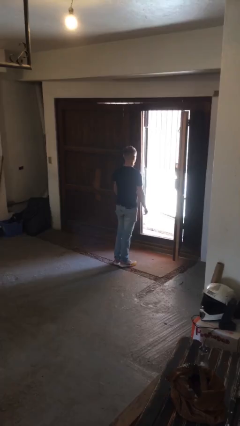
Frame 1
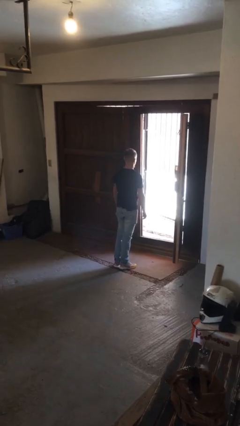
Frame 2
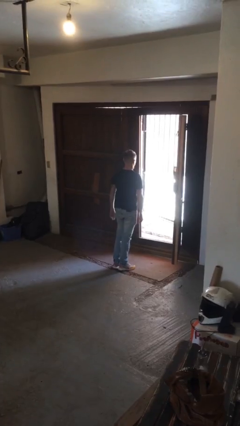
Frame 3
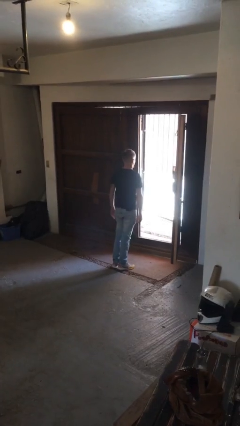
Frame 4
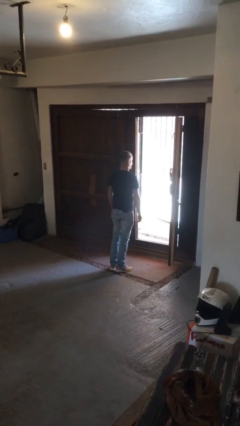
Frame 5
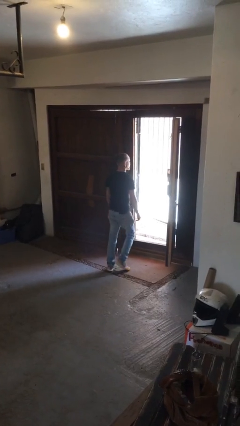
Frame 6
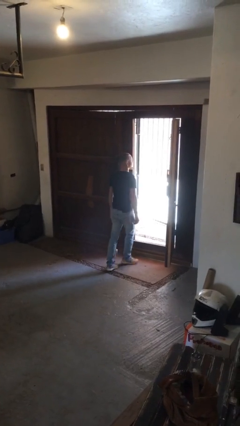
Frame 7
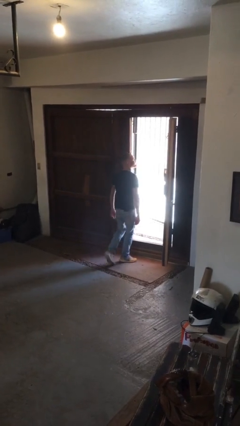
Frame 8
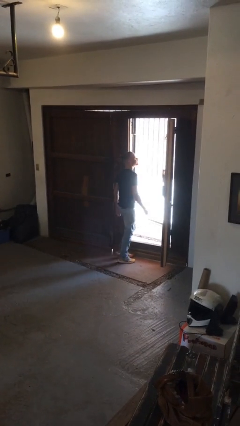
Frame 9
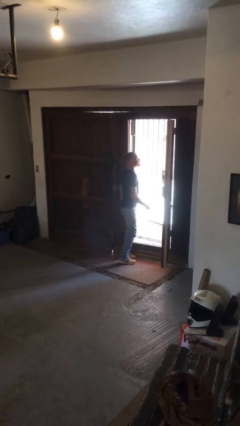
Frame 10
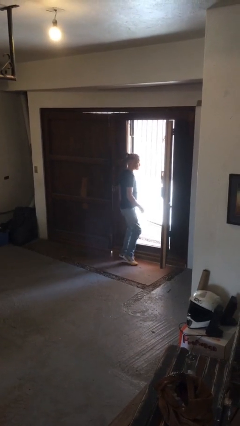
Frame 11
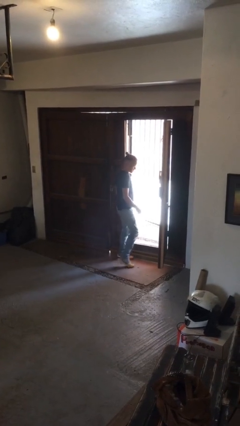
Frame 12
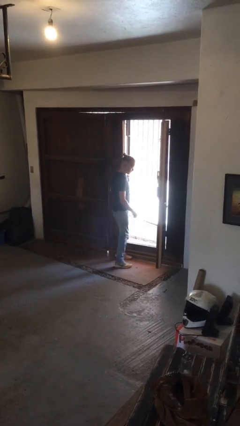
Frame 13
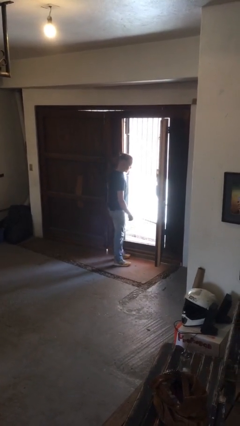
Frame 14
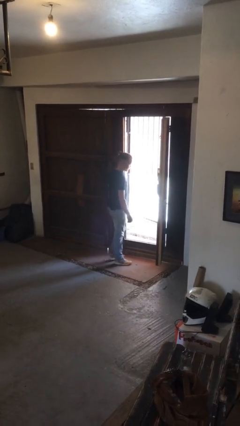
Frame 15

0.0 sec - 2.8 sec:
person bumps into wall

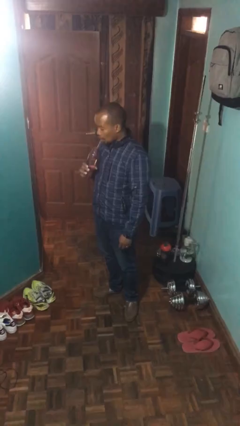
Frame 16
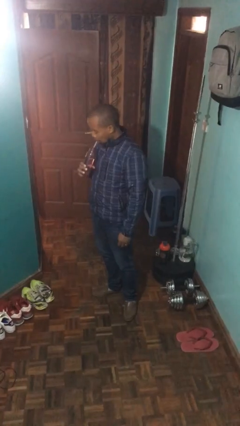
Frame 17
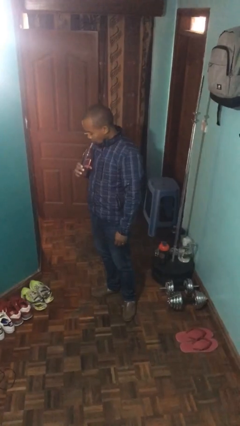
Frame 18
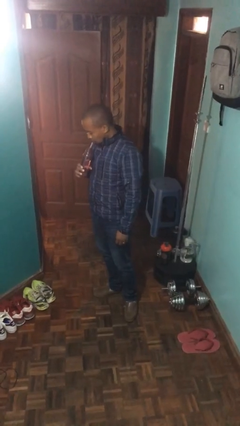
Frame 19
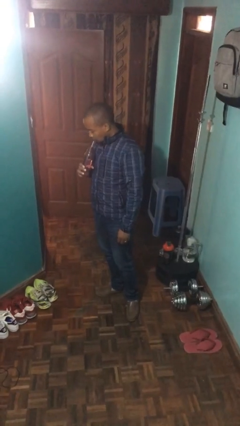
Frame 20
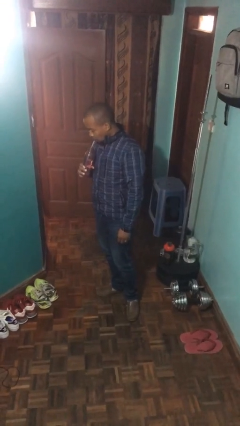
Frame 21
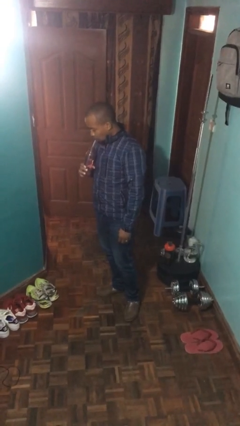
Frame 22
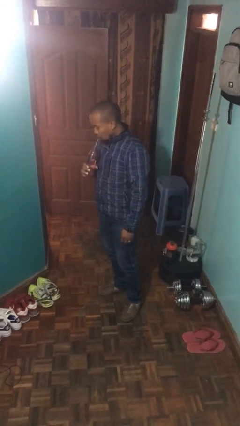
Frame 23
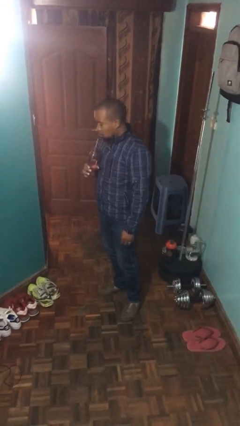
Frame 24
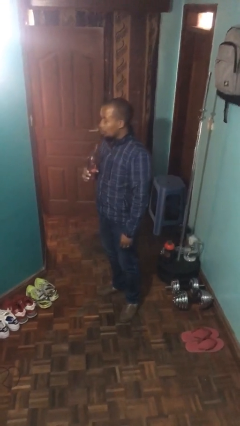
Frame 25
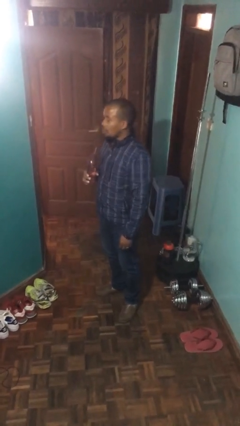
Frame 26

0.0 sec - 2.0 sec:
person drinks from straw

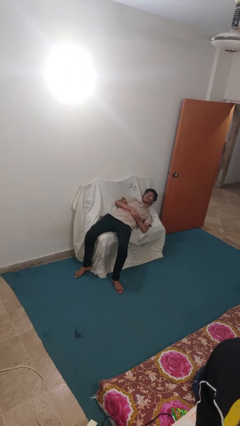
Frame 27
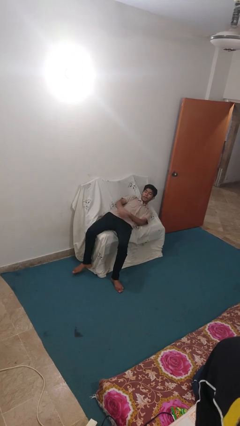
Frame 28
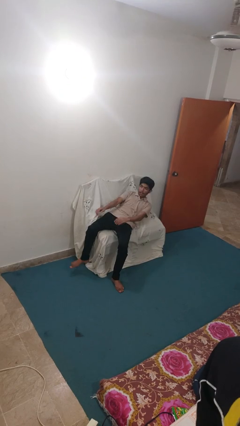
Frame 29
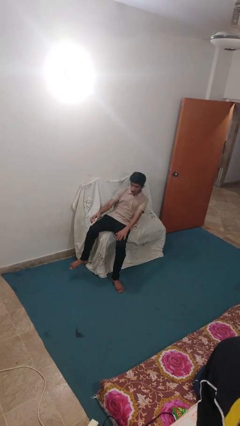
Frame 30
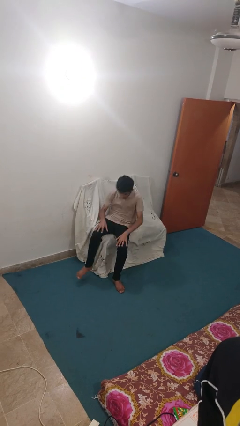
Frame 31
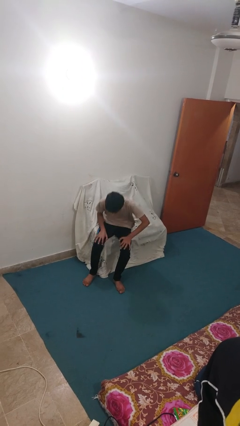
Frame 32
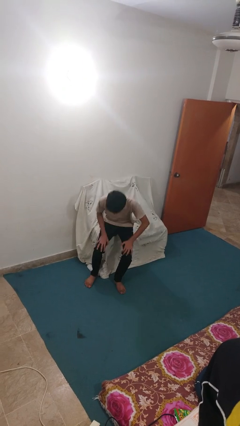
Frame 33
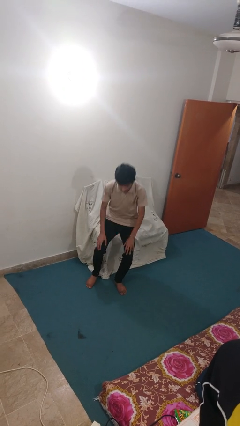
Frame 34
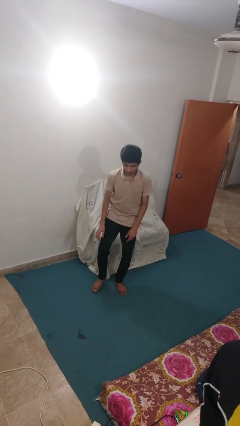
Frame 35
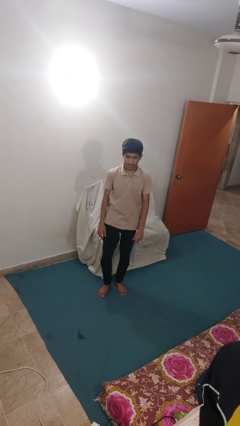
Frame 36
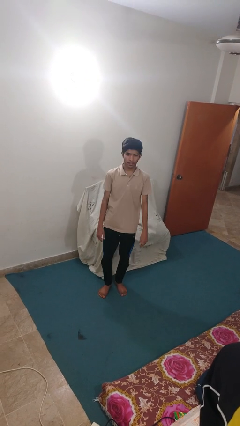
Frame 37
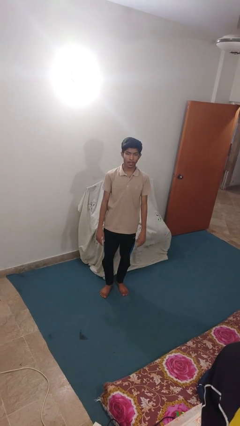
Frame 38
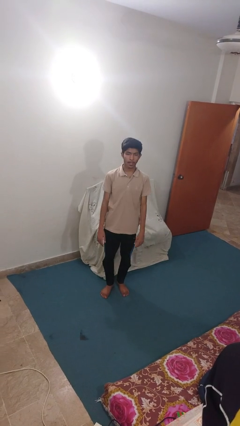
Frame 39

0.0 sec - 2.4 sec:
person stands up

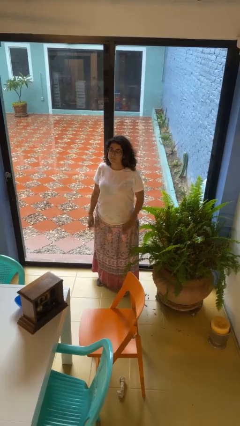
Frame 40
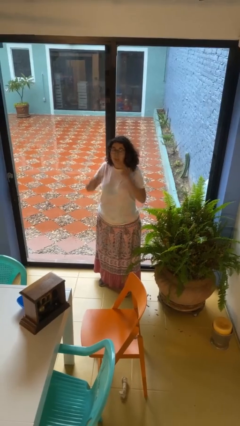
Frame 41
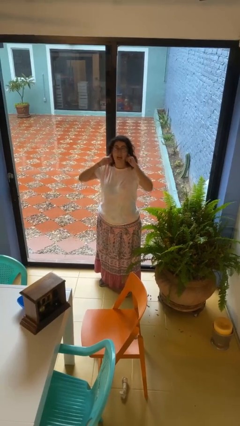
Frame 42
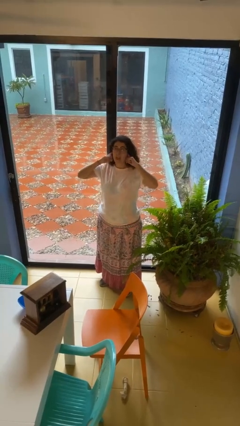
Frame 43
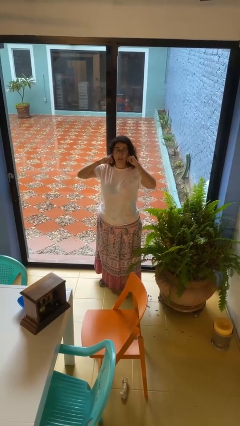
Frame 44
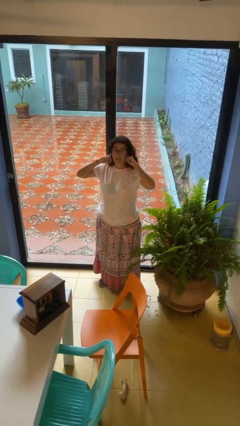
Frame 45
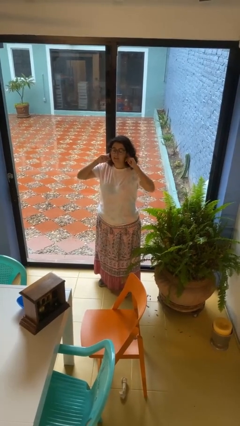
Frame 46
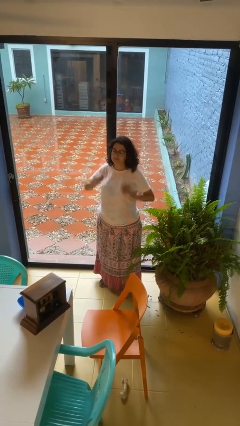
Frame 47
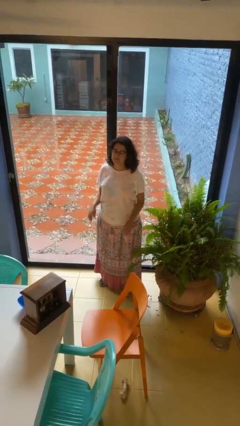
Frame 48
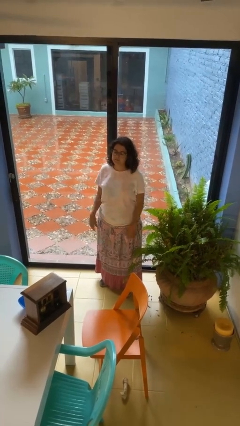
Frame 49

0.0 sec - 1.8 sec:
person puts fingers in ear

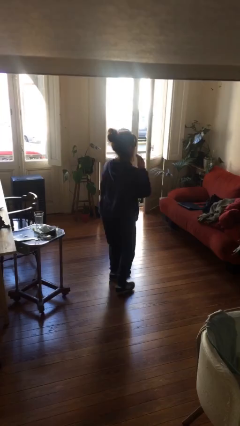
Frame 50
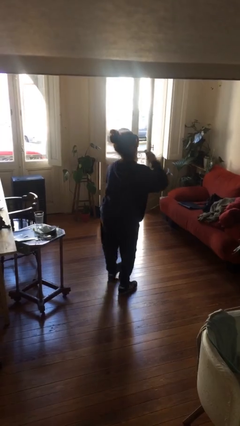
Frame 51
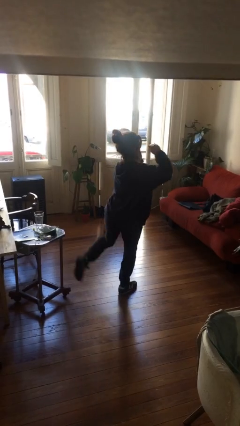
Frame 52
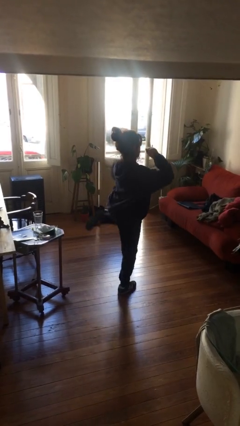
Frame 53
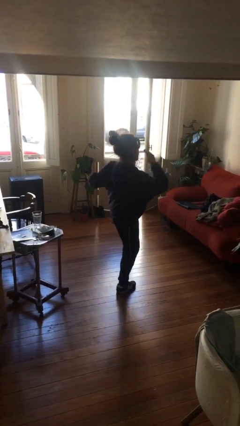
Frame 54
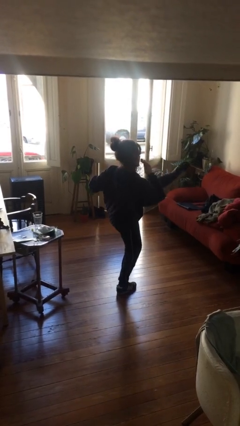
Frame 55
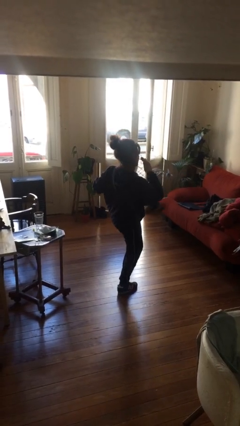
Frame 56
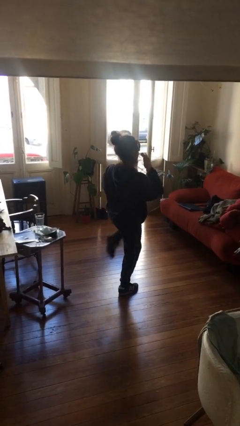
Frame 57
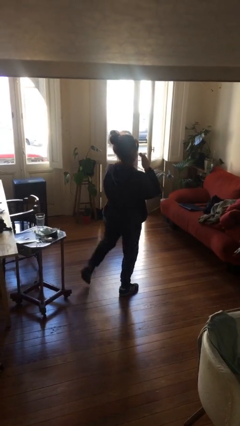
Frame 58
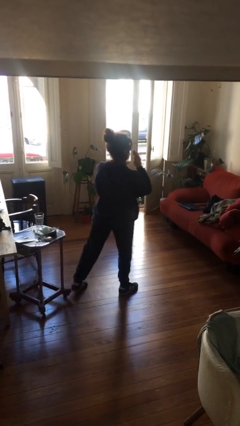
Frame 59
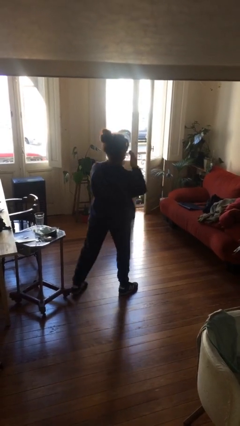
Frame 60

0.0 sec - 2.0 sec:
person karate kicks

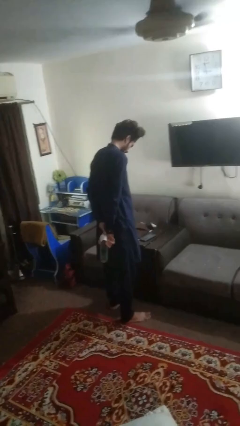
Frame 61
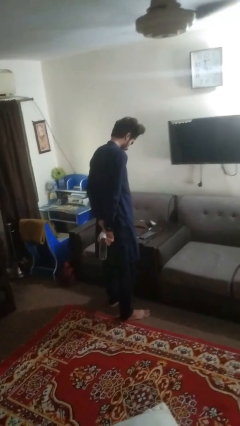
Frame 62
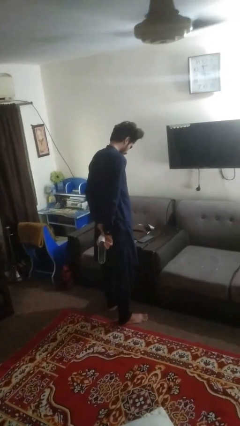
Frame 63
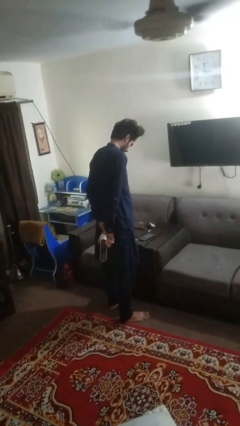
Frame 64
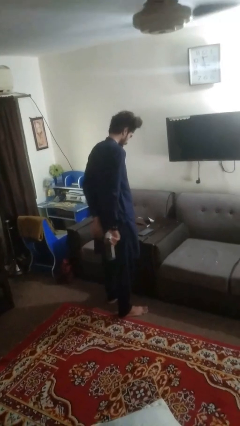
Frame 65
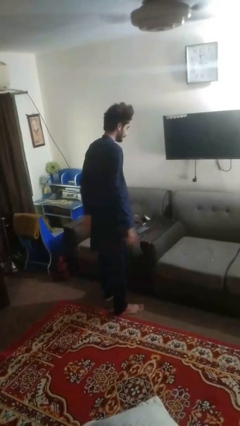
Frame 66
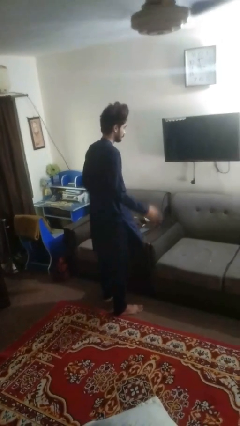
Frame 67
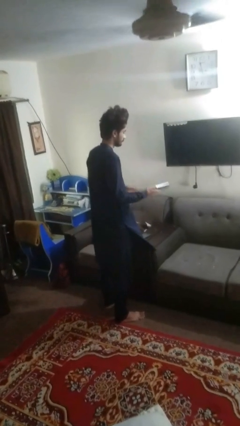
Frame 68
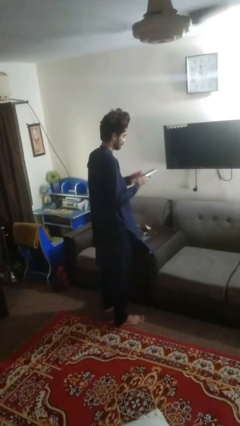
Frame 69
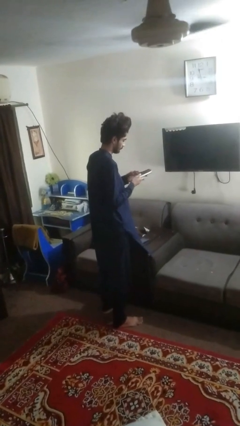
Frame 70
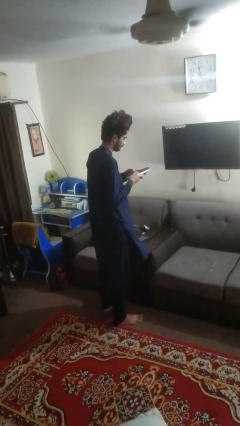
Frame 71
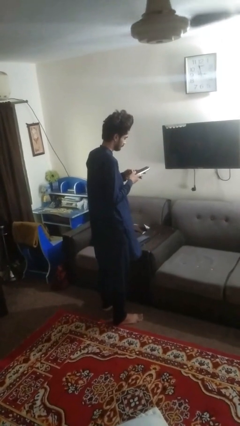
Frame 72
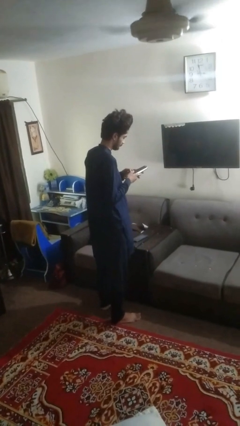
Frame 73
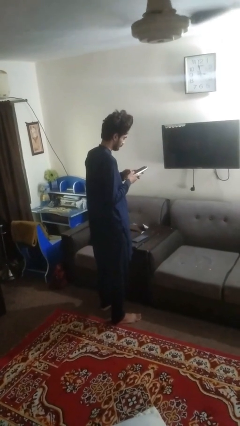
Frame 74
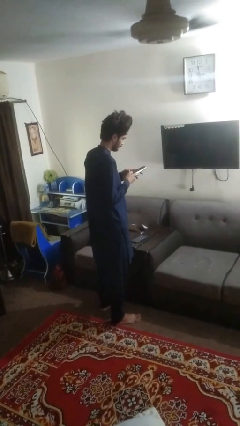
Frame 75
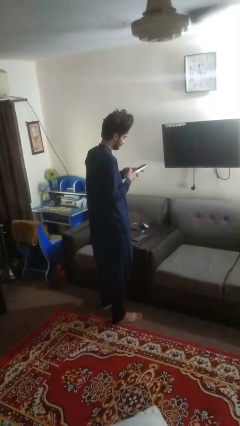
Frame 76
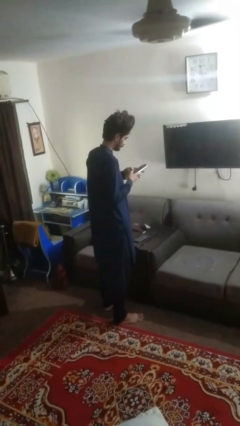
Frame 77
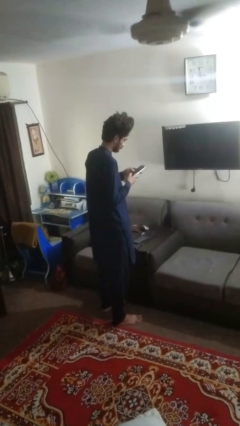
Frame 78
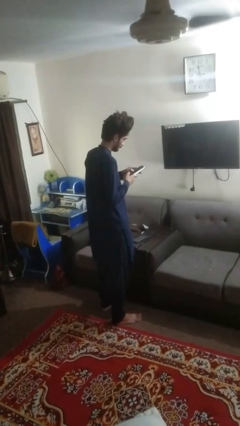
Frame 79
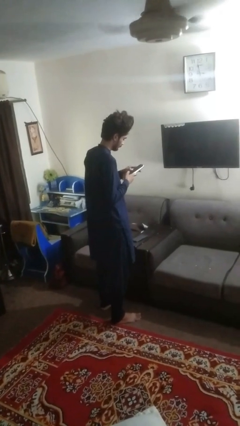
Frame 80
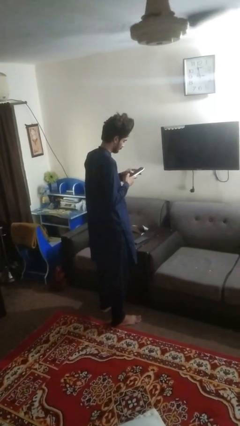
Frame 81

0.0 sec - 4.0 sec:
person uses television remote

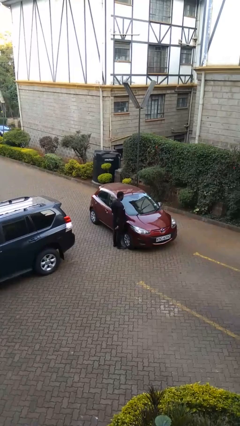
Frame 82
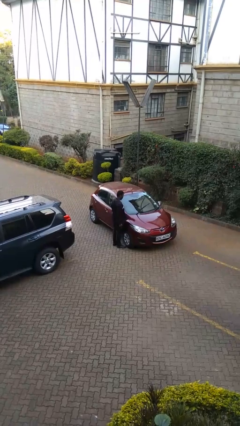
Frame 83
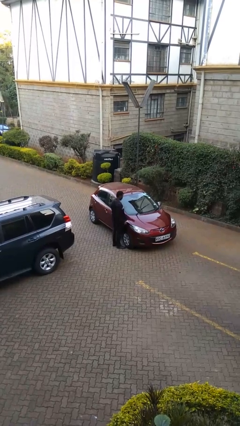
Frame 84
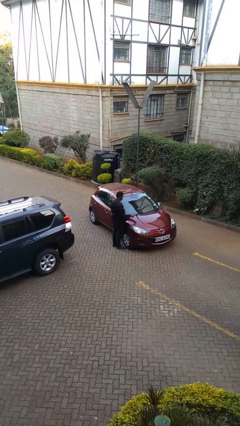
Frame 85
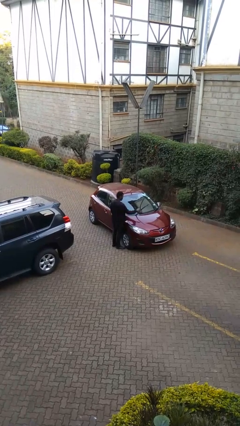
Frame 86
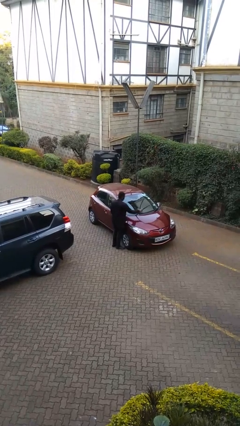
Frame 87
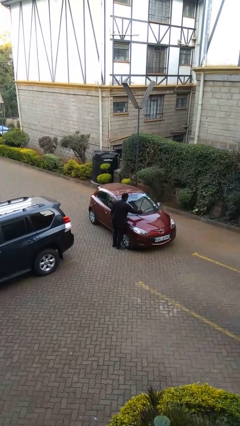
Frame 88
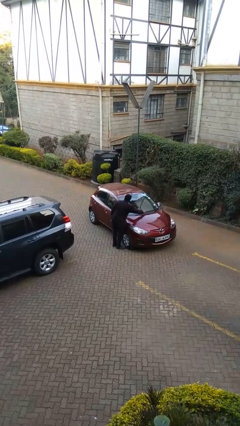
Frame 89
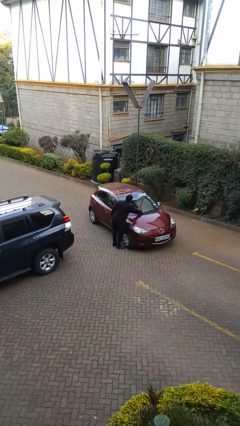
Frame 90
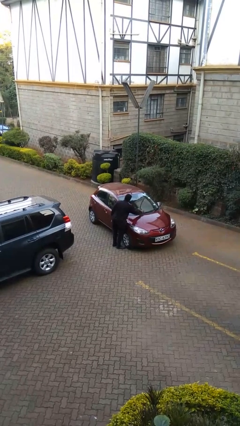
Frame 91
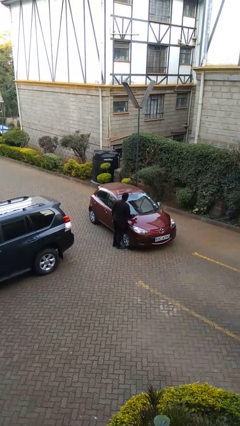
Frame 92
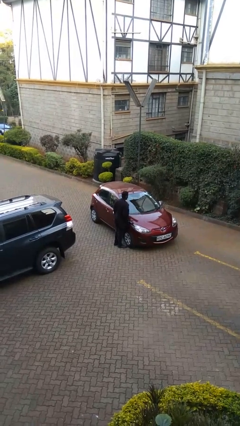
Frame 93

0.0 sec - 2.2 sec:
person flips down car wipers
